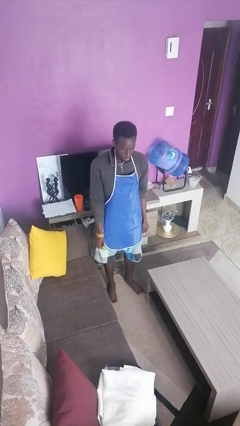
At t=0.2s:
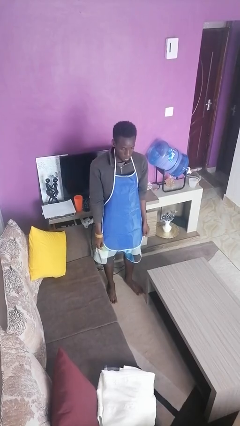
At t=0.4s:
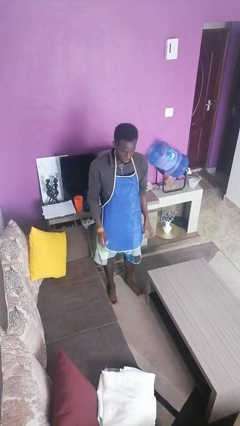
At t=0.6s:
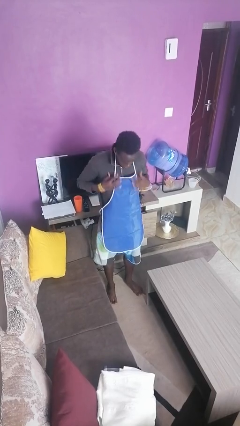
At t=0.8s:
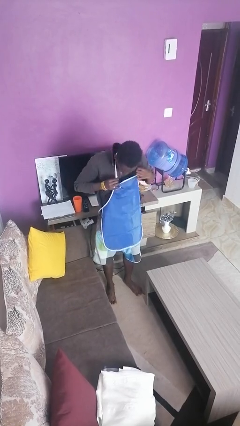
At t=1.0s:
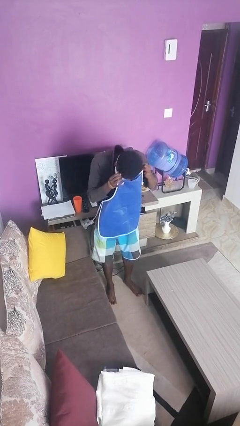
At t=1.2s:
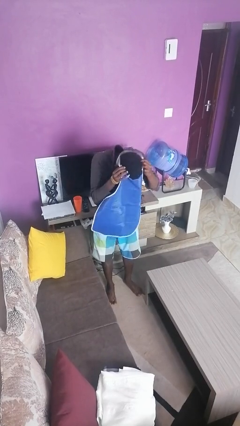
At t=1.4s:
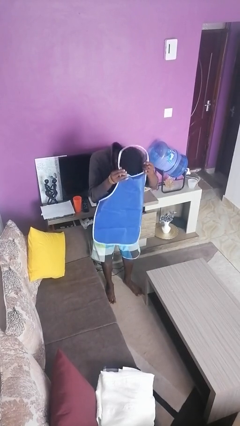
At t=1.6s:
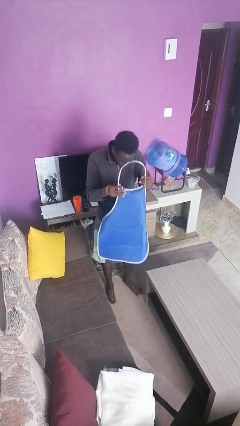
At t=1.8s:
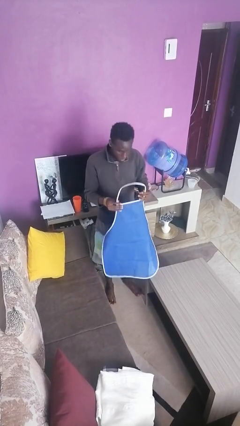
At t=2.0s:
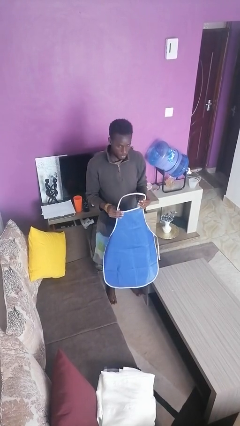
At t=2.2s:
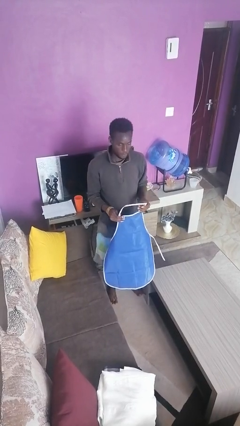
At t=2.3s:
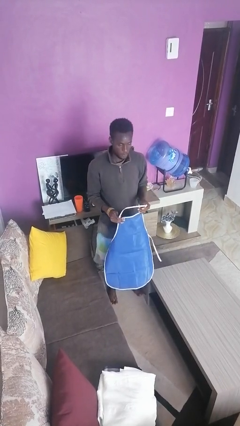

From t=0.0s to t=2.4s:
person takes off apron

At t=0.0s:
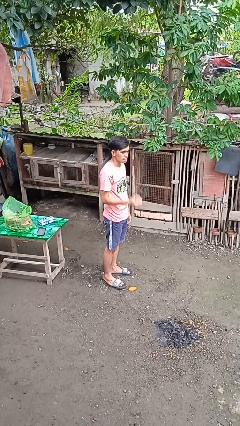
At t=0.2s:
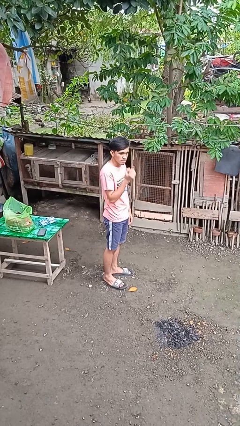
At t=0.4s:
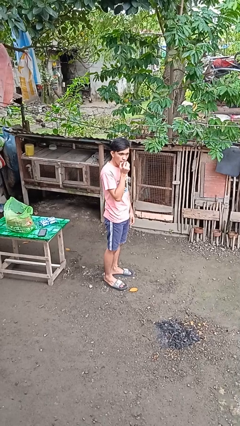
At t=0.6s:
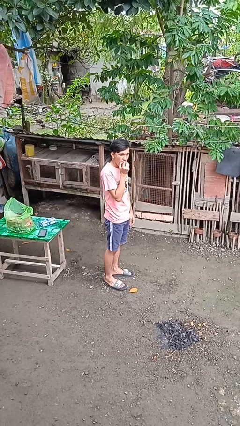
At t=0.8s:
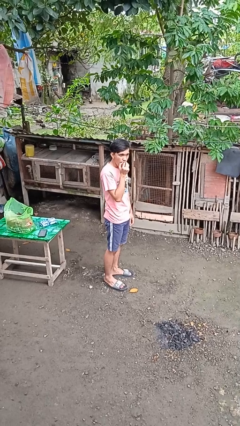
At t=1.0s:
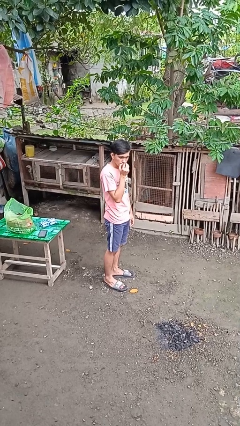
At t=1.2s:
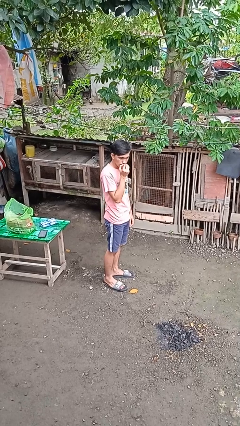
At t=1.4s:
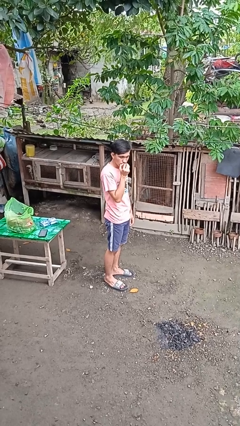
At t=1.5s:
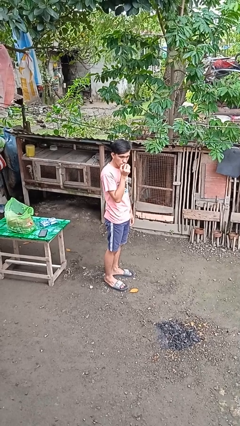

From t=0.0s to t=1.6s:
person eats apple

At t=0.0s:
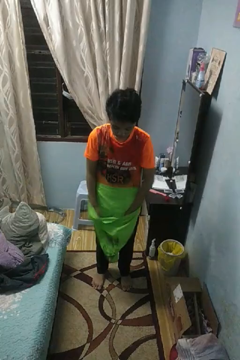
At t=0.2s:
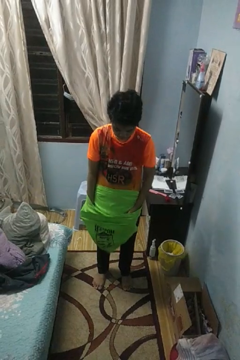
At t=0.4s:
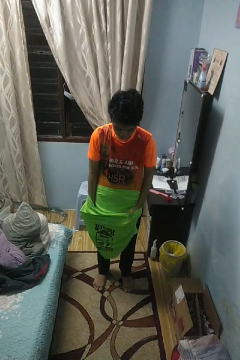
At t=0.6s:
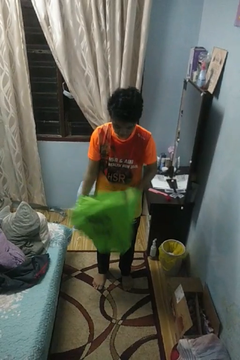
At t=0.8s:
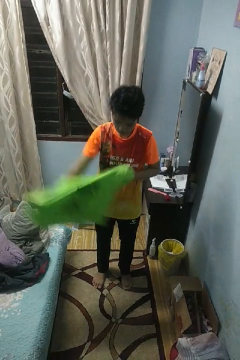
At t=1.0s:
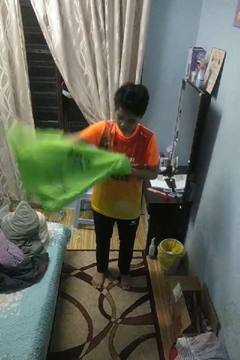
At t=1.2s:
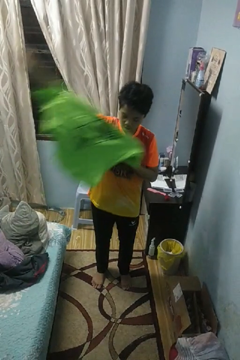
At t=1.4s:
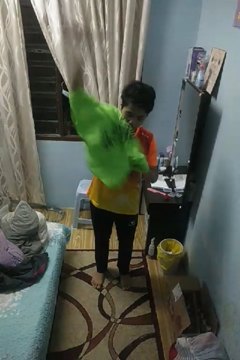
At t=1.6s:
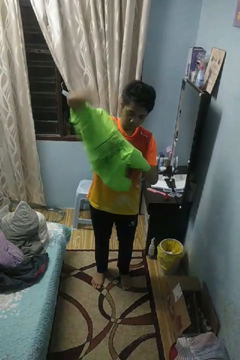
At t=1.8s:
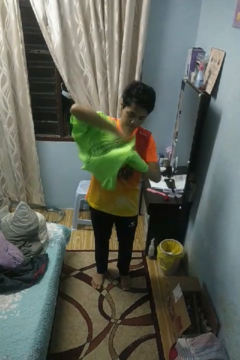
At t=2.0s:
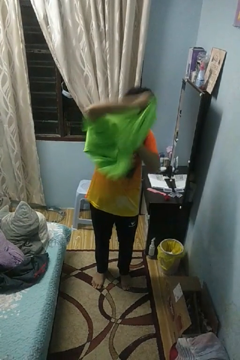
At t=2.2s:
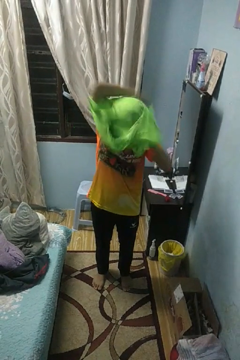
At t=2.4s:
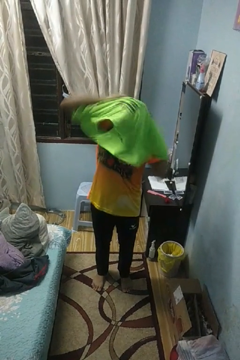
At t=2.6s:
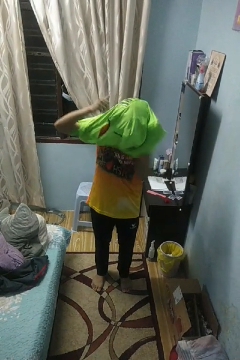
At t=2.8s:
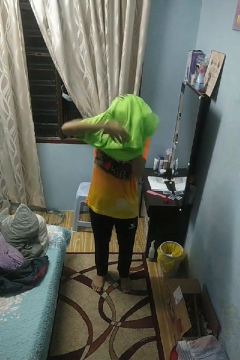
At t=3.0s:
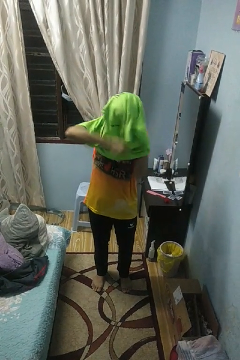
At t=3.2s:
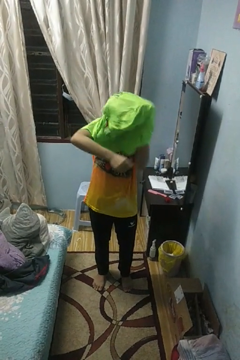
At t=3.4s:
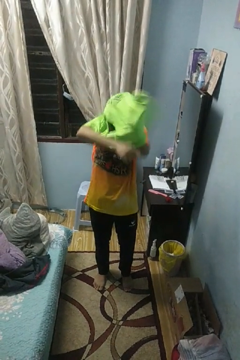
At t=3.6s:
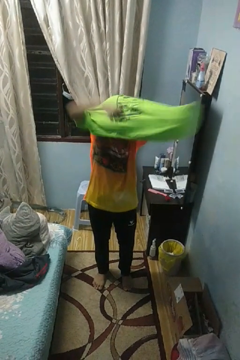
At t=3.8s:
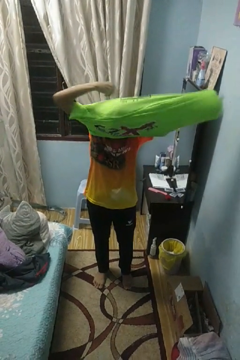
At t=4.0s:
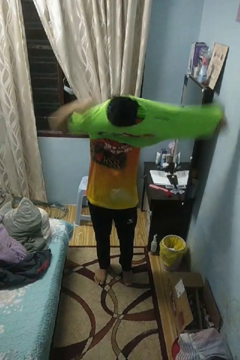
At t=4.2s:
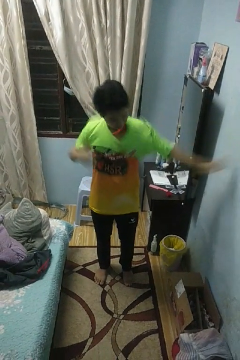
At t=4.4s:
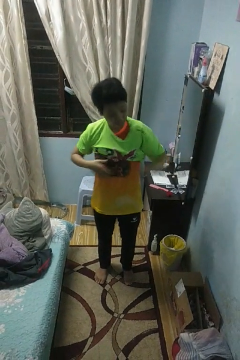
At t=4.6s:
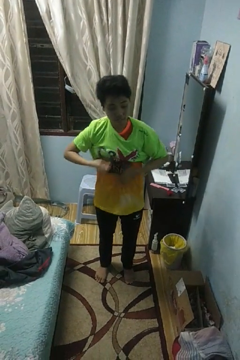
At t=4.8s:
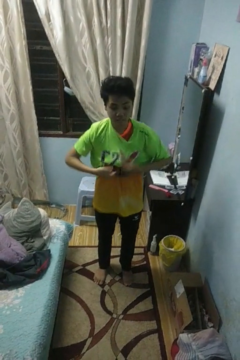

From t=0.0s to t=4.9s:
person puts on shirt

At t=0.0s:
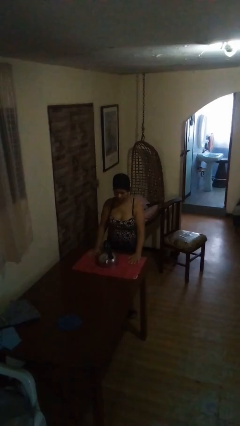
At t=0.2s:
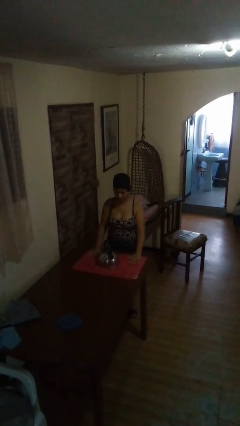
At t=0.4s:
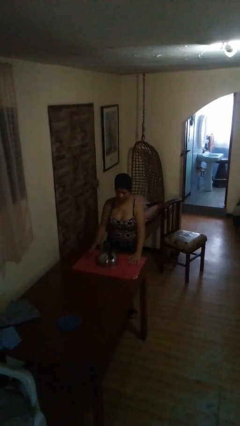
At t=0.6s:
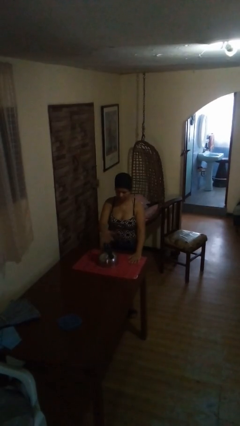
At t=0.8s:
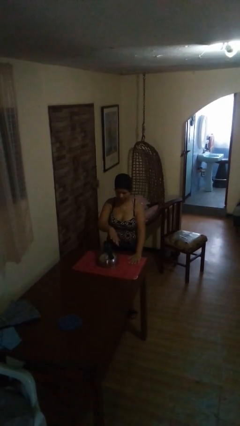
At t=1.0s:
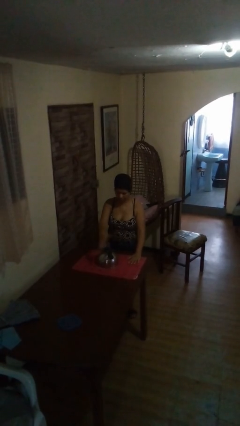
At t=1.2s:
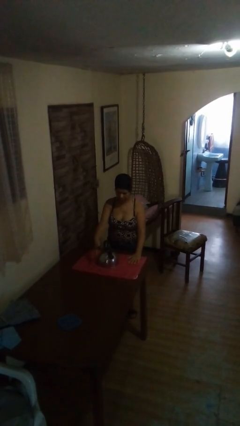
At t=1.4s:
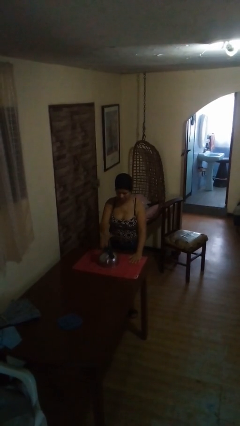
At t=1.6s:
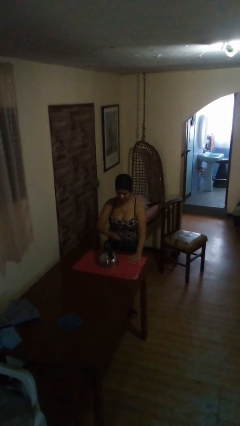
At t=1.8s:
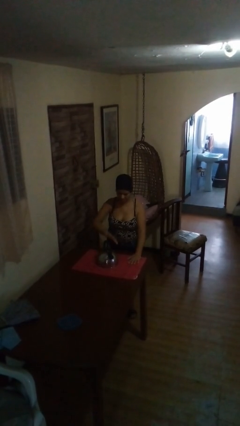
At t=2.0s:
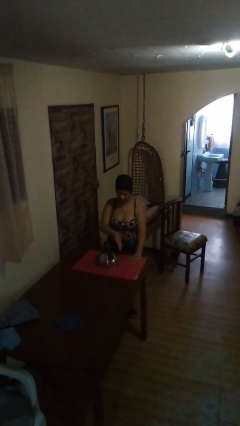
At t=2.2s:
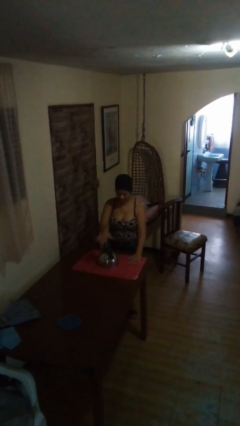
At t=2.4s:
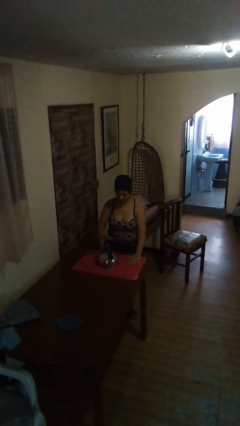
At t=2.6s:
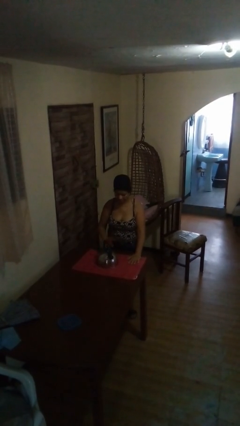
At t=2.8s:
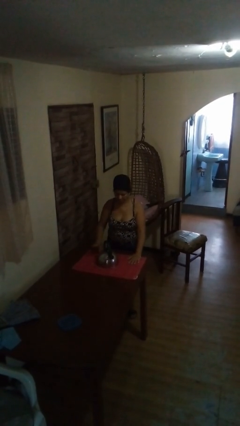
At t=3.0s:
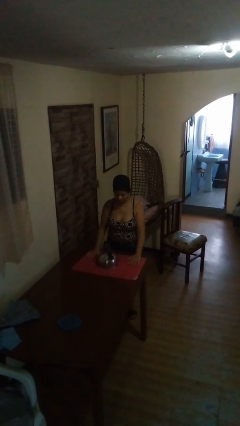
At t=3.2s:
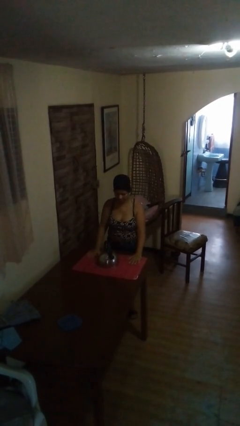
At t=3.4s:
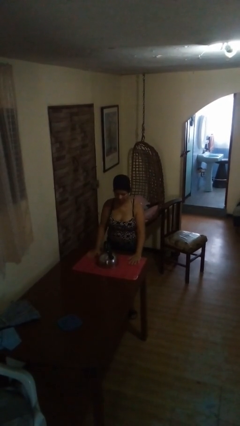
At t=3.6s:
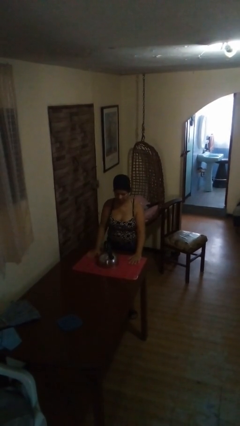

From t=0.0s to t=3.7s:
person waves hand over object

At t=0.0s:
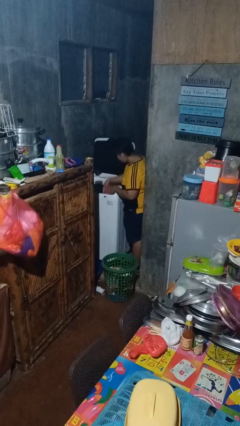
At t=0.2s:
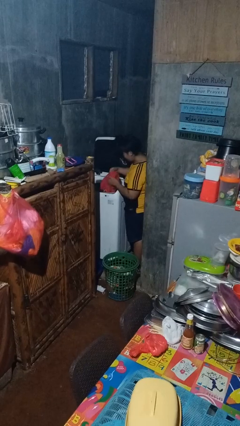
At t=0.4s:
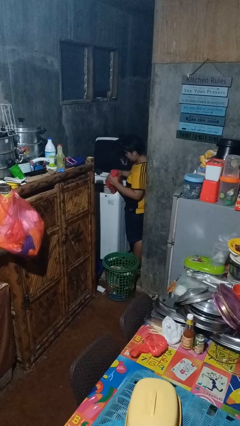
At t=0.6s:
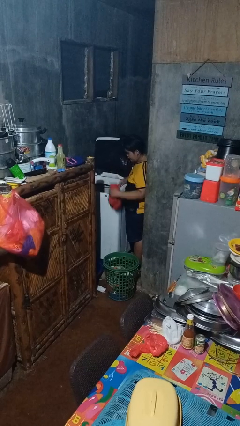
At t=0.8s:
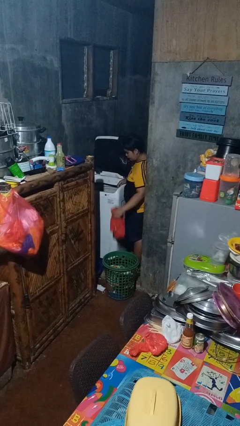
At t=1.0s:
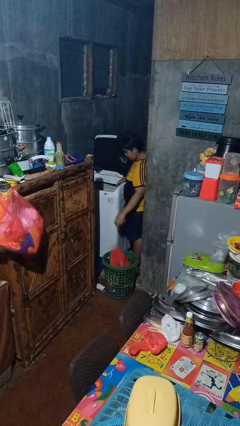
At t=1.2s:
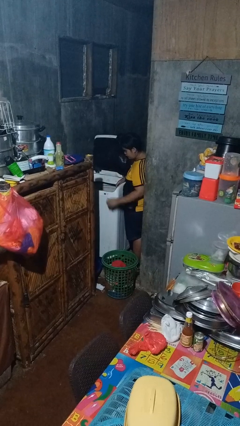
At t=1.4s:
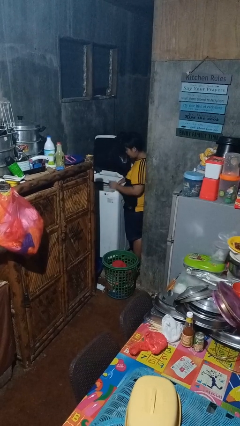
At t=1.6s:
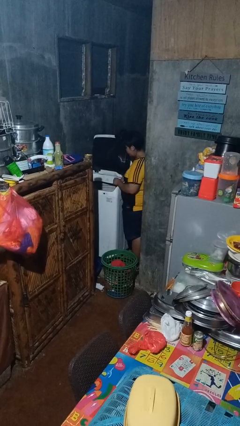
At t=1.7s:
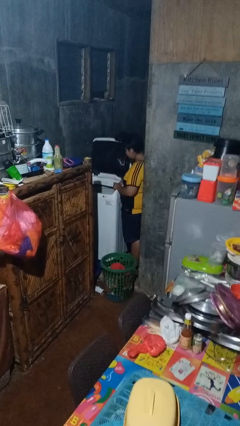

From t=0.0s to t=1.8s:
person unloads clotheswasher

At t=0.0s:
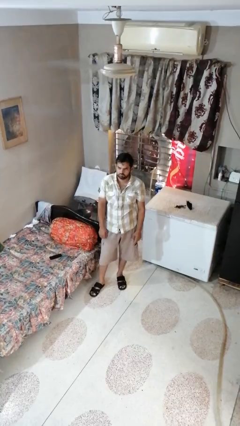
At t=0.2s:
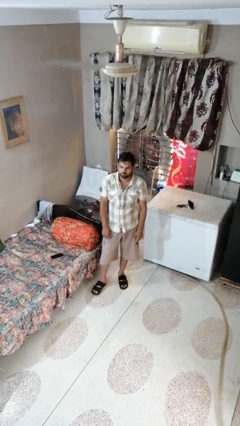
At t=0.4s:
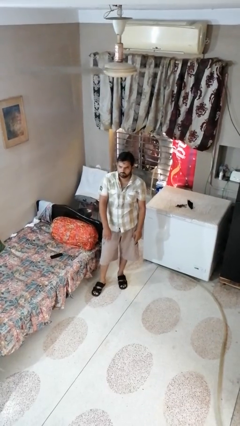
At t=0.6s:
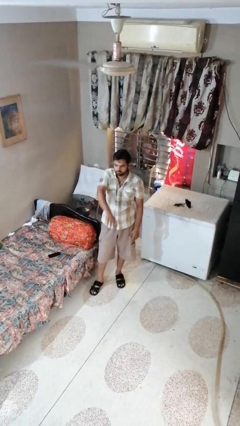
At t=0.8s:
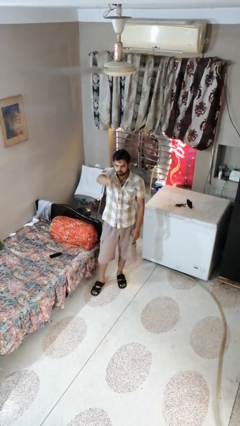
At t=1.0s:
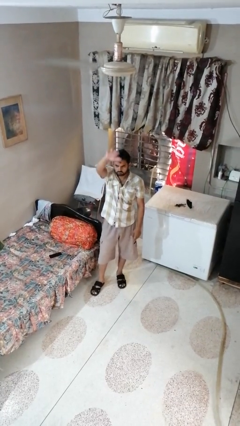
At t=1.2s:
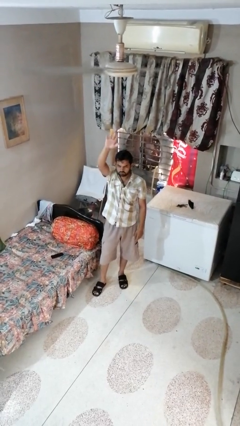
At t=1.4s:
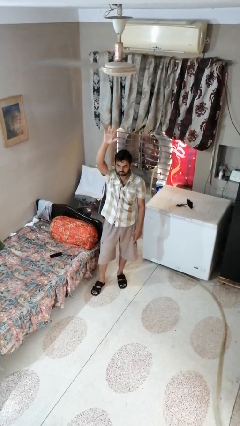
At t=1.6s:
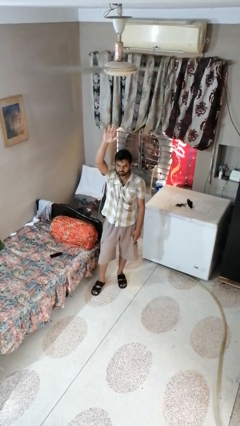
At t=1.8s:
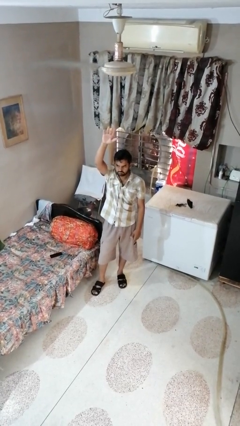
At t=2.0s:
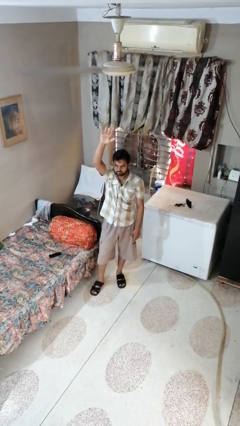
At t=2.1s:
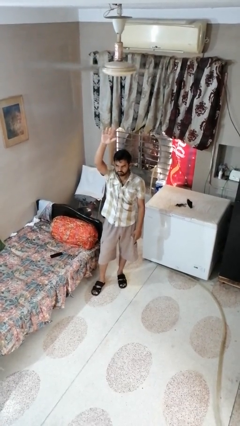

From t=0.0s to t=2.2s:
person gestures swipe up

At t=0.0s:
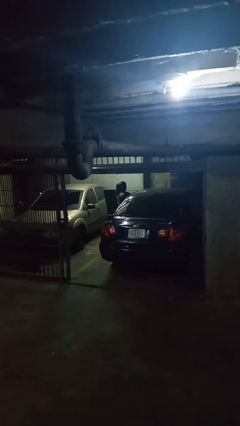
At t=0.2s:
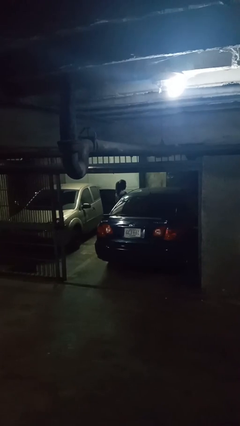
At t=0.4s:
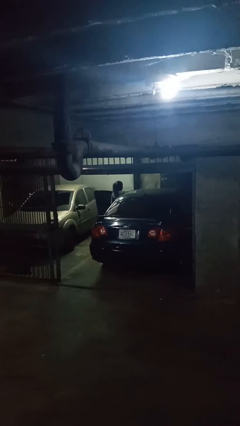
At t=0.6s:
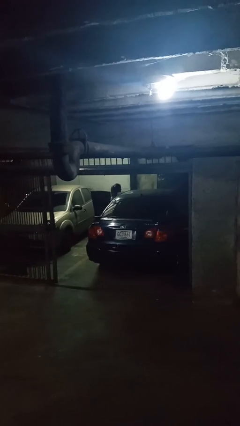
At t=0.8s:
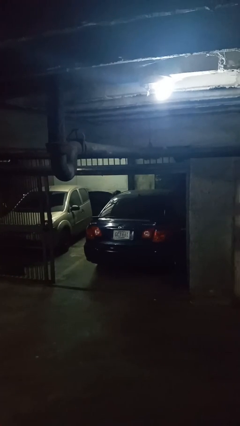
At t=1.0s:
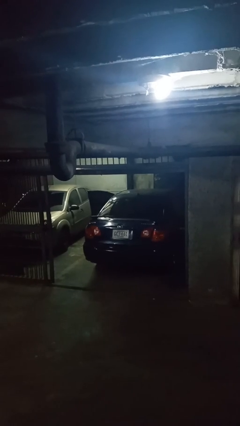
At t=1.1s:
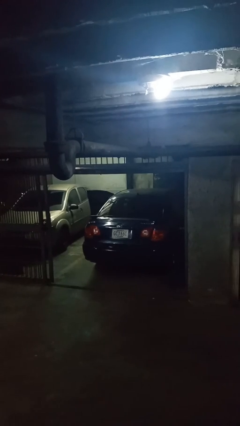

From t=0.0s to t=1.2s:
person enters car

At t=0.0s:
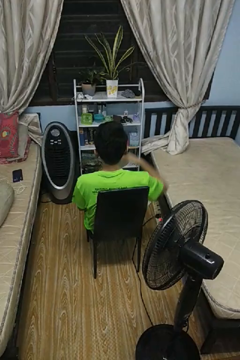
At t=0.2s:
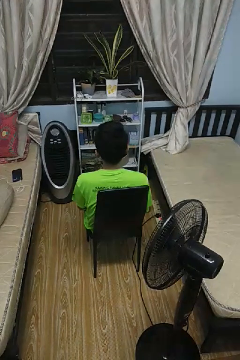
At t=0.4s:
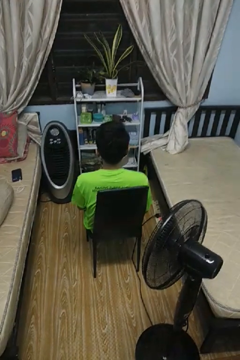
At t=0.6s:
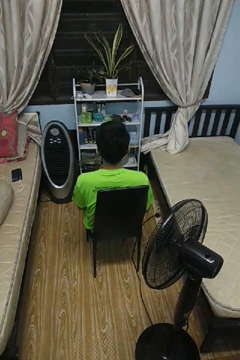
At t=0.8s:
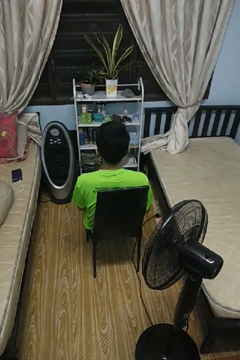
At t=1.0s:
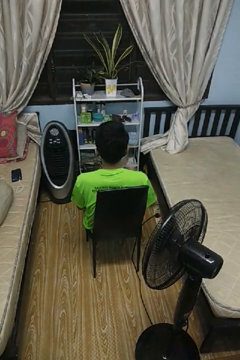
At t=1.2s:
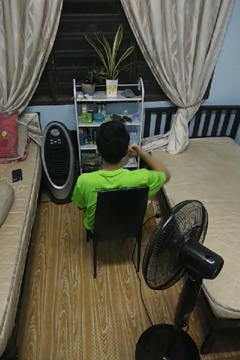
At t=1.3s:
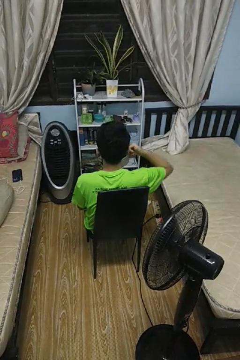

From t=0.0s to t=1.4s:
person gestures call me
